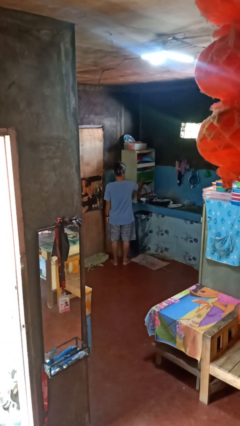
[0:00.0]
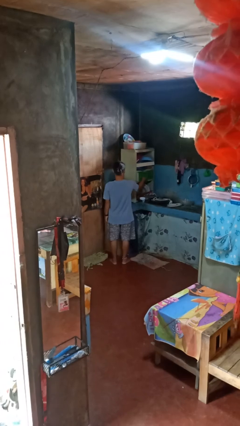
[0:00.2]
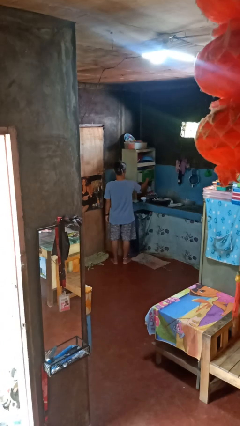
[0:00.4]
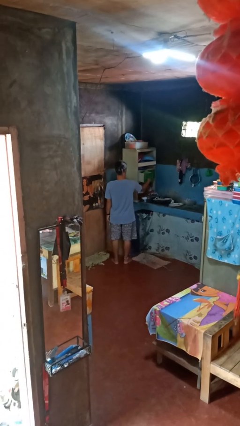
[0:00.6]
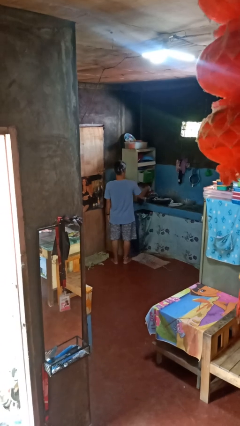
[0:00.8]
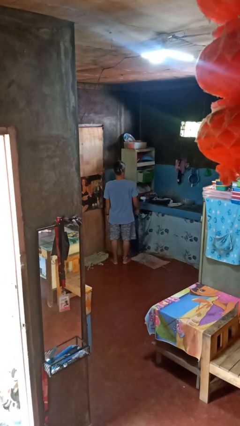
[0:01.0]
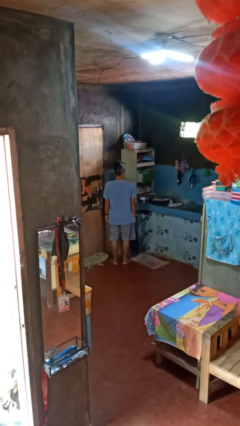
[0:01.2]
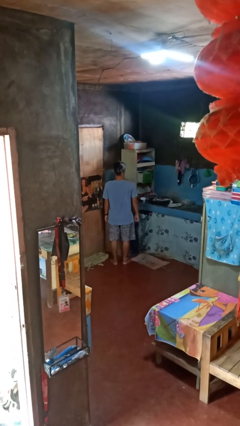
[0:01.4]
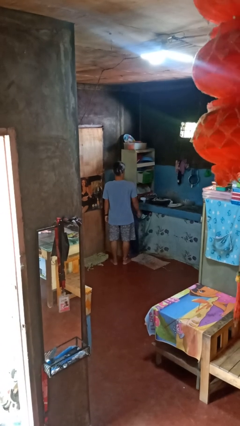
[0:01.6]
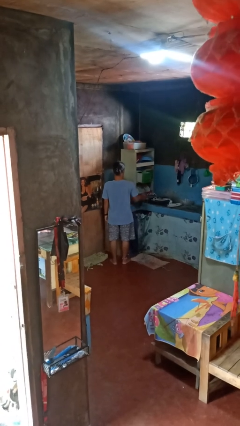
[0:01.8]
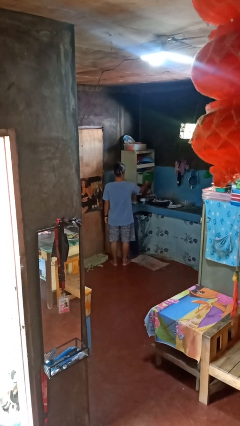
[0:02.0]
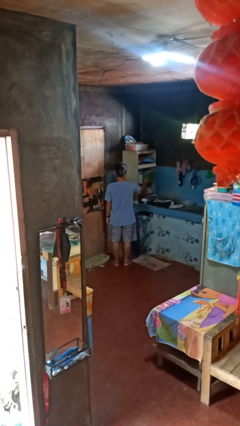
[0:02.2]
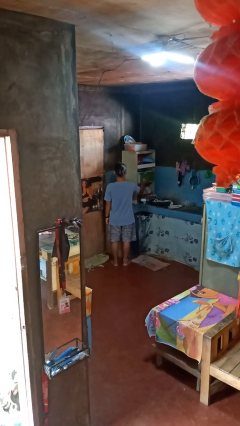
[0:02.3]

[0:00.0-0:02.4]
person opens kitchen drawer

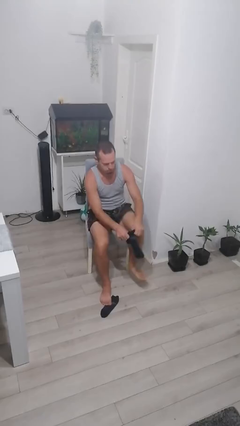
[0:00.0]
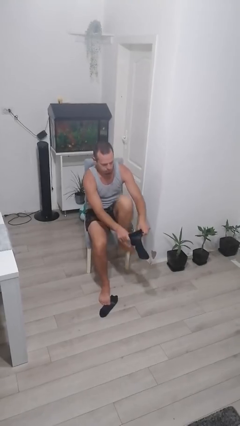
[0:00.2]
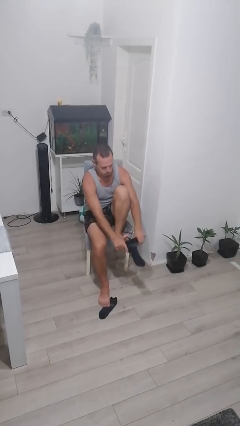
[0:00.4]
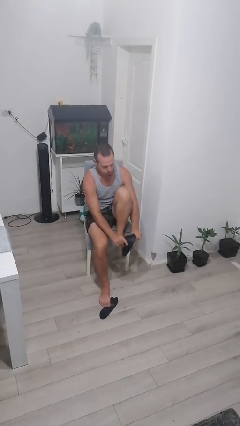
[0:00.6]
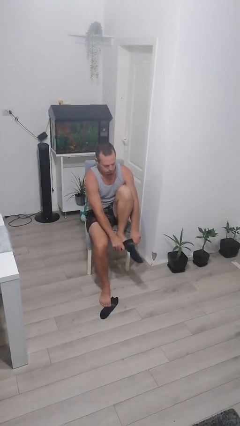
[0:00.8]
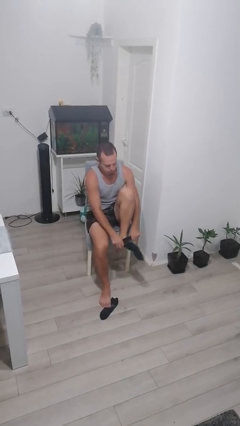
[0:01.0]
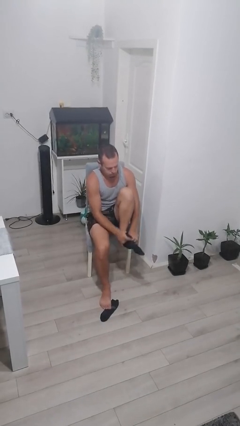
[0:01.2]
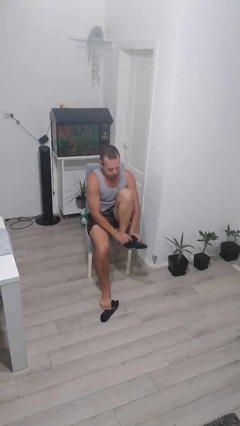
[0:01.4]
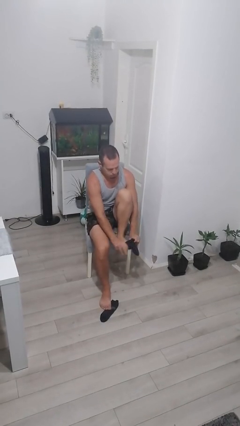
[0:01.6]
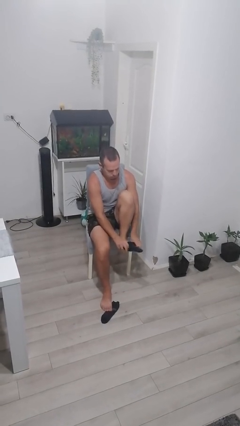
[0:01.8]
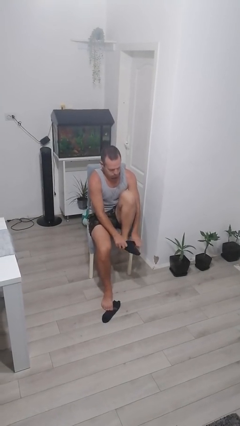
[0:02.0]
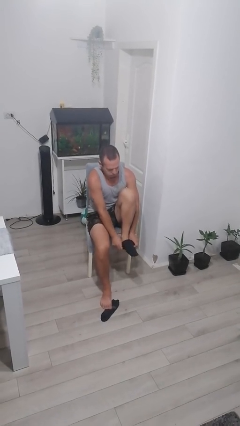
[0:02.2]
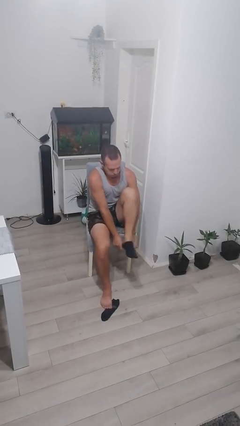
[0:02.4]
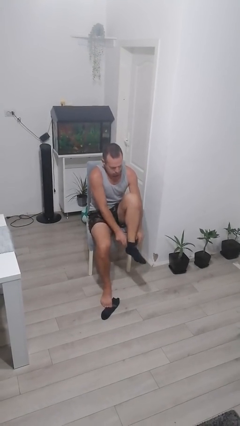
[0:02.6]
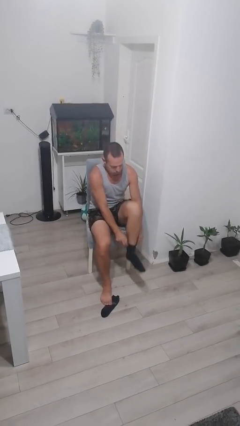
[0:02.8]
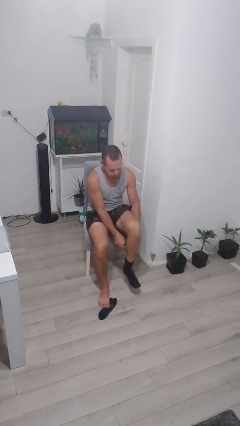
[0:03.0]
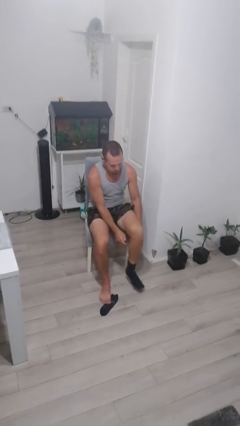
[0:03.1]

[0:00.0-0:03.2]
person puts on socks

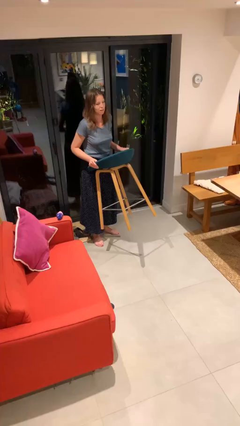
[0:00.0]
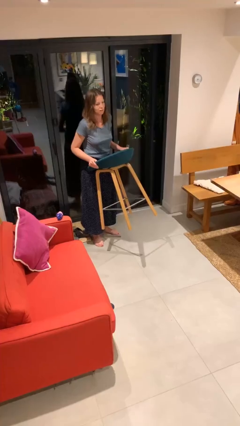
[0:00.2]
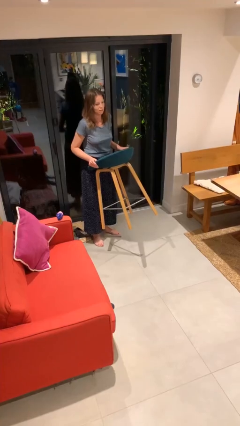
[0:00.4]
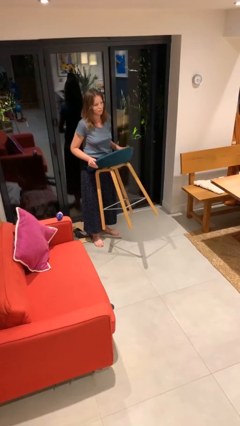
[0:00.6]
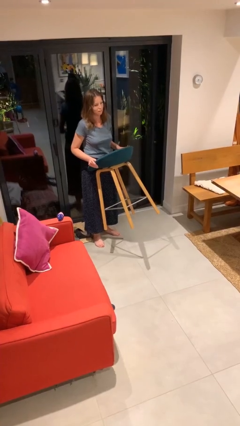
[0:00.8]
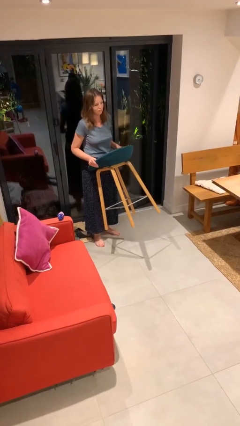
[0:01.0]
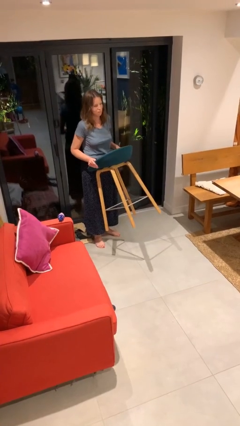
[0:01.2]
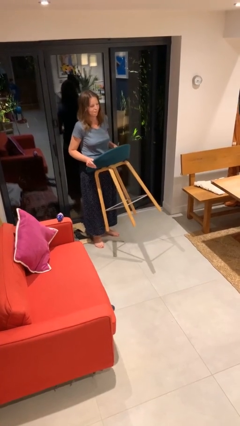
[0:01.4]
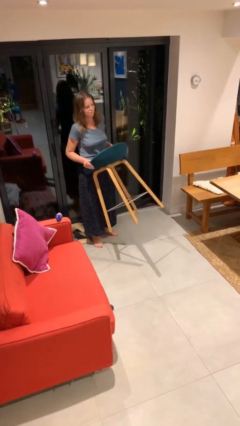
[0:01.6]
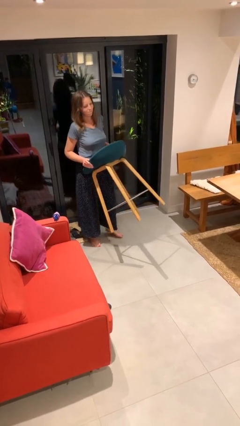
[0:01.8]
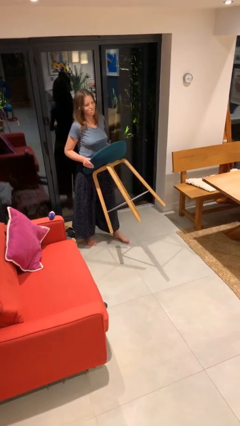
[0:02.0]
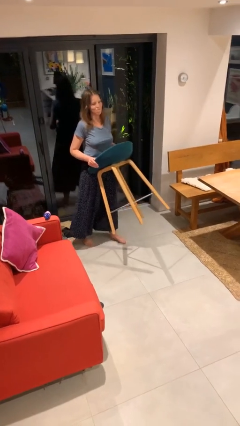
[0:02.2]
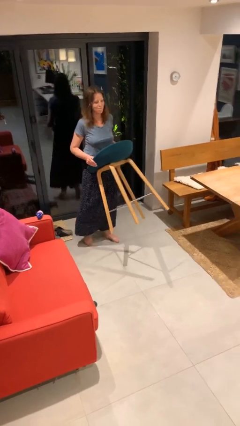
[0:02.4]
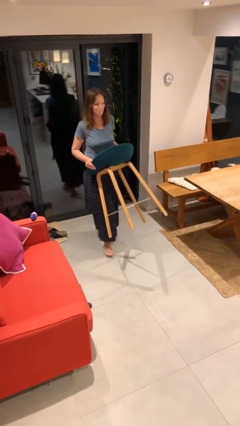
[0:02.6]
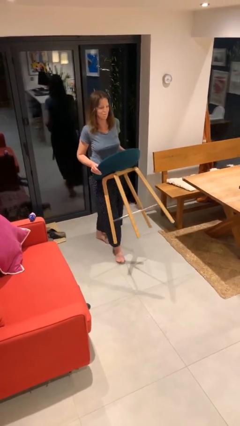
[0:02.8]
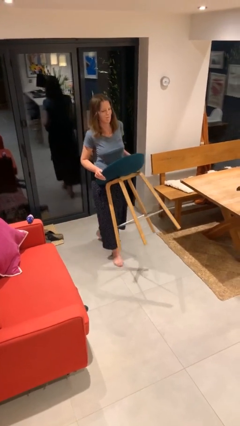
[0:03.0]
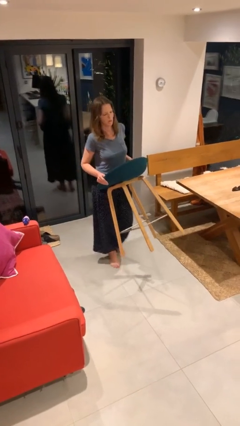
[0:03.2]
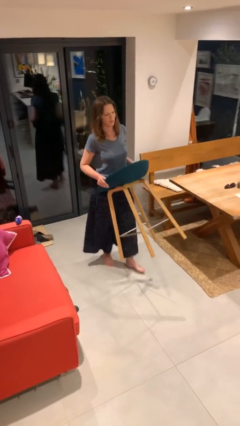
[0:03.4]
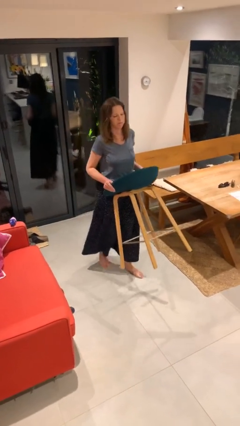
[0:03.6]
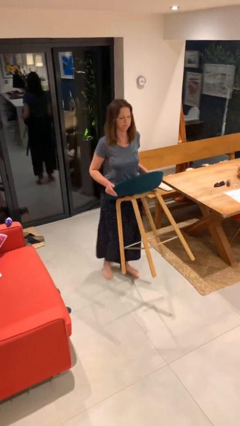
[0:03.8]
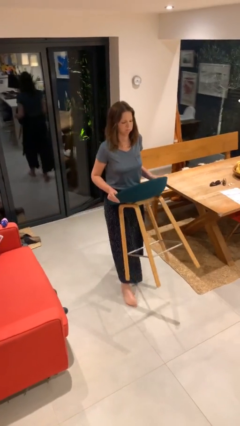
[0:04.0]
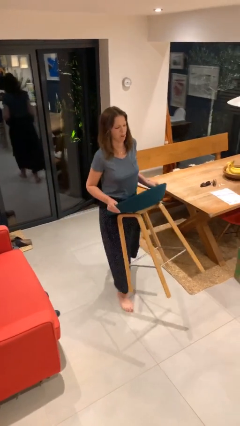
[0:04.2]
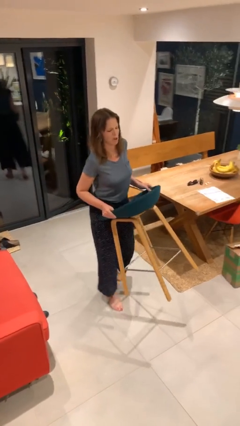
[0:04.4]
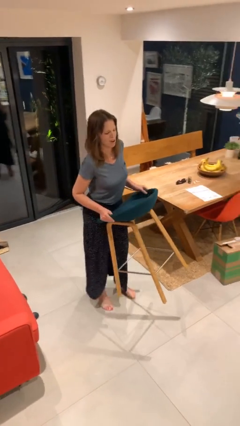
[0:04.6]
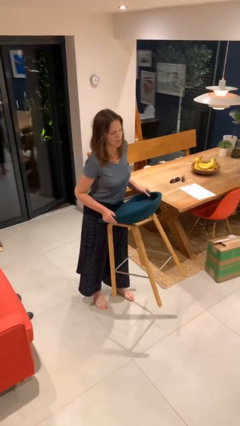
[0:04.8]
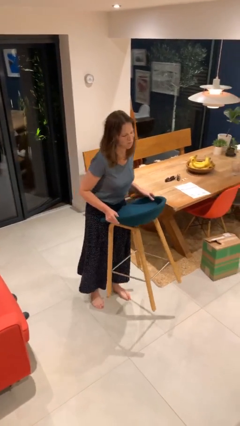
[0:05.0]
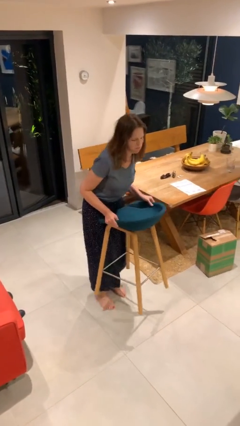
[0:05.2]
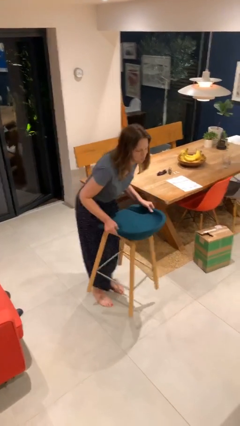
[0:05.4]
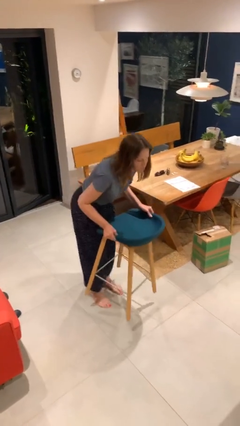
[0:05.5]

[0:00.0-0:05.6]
person carries heavy object

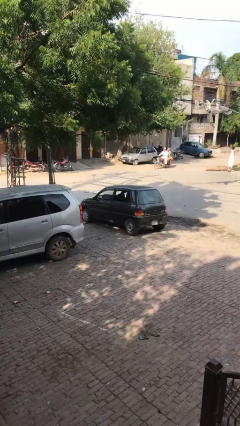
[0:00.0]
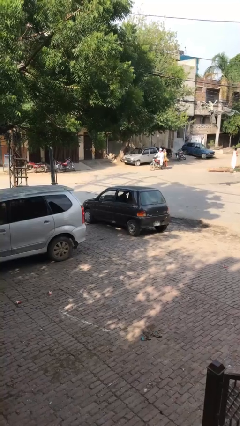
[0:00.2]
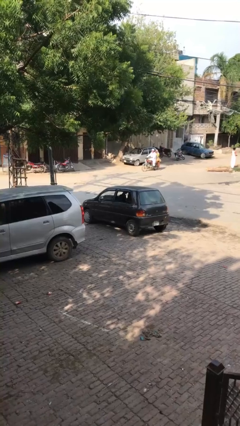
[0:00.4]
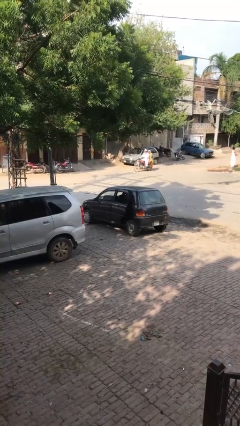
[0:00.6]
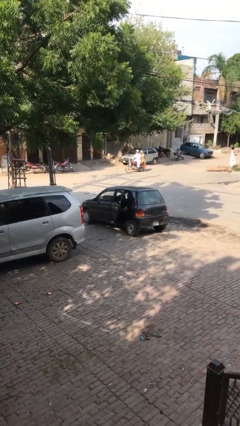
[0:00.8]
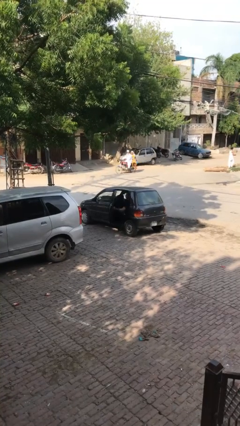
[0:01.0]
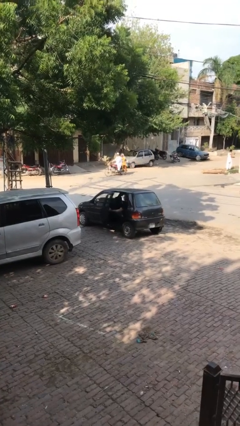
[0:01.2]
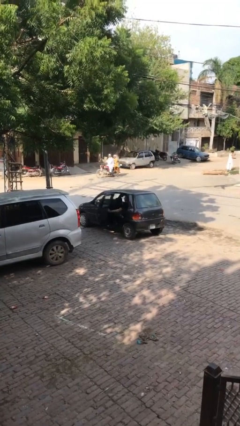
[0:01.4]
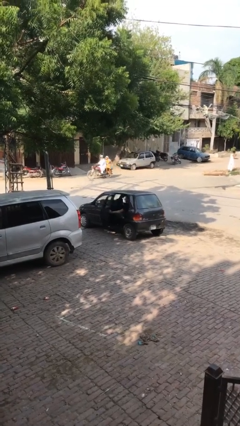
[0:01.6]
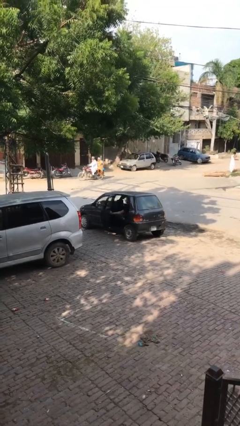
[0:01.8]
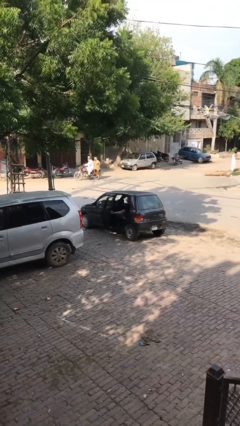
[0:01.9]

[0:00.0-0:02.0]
person opens car door

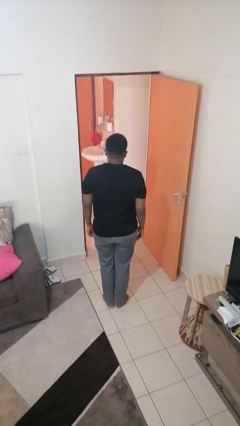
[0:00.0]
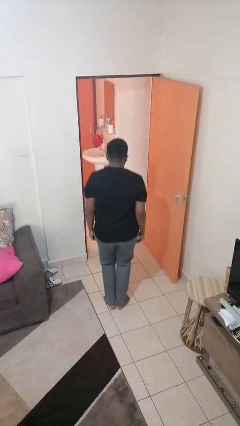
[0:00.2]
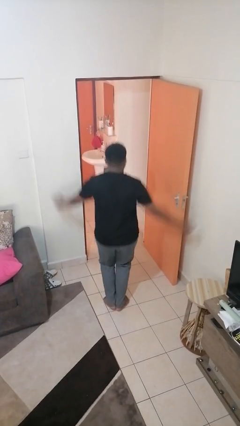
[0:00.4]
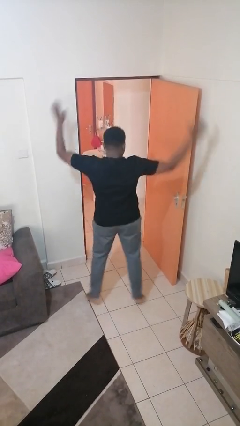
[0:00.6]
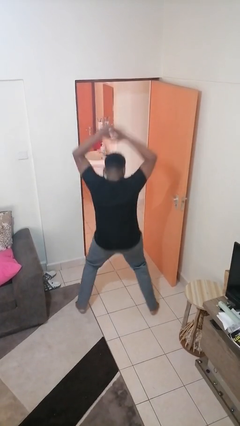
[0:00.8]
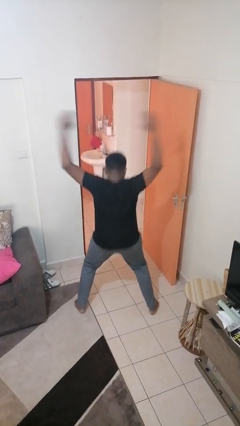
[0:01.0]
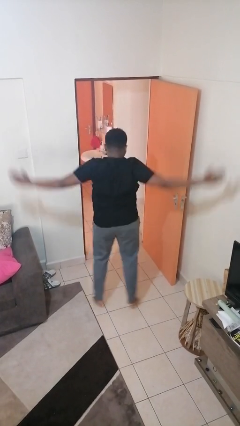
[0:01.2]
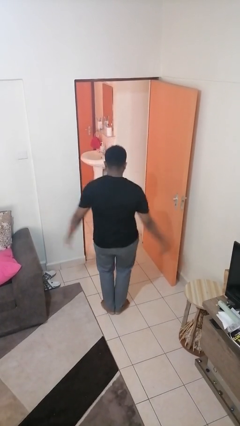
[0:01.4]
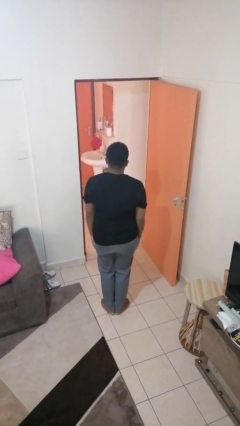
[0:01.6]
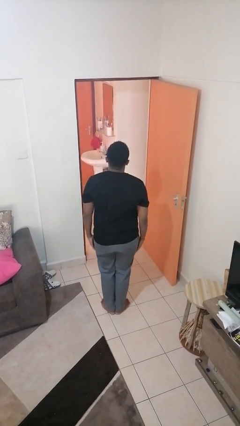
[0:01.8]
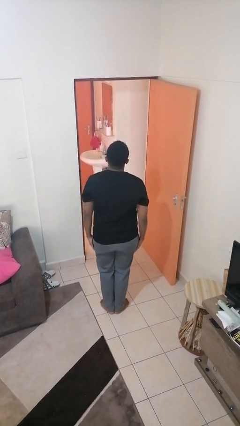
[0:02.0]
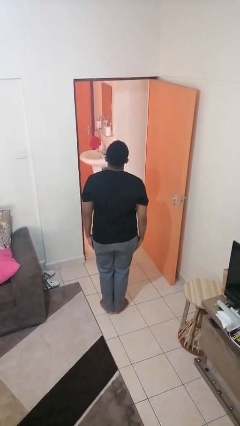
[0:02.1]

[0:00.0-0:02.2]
person exercises with jumping jacks

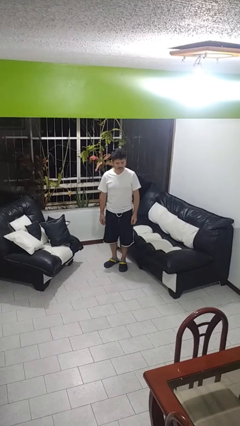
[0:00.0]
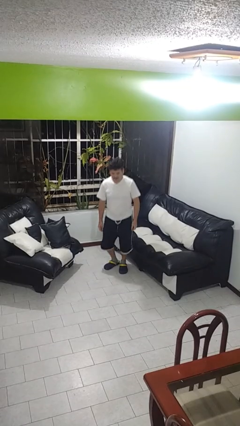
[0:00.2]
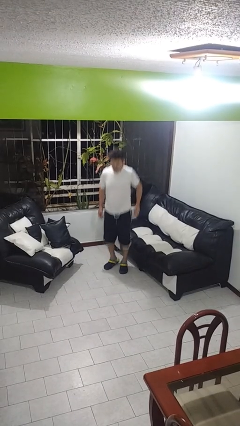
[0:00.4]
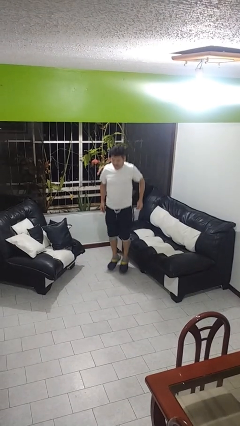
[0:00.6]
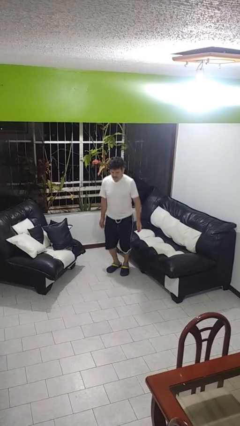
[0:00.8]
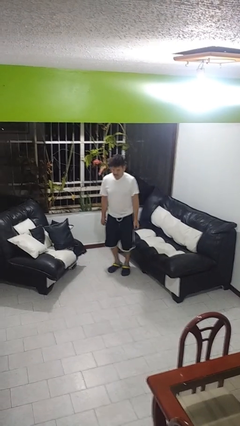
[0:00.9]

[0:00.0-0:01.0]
person jumps

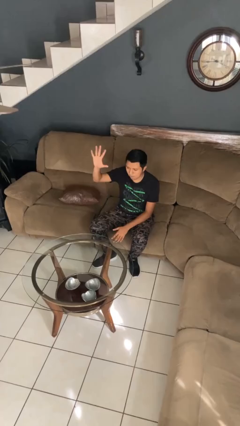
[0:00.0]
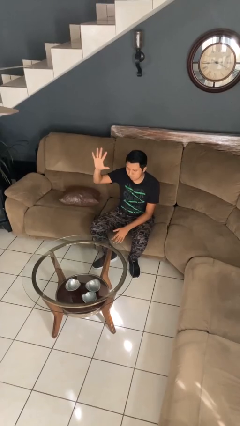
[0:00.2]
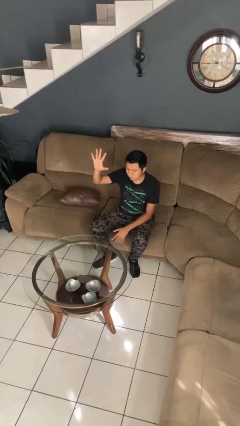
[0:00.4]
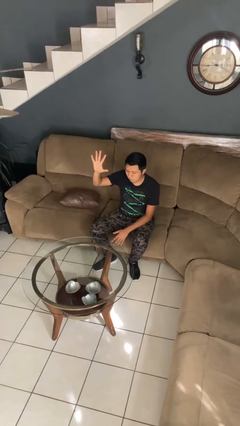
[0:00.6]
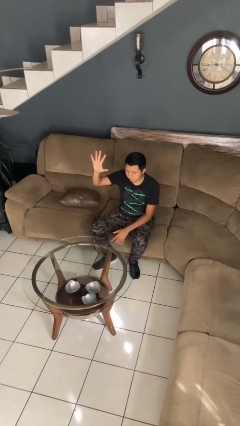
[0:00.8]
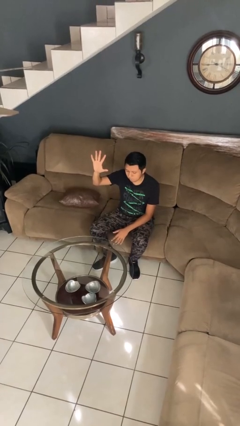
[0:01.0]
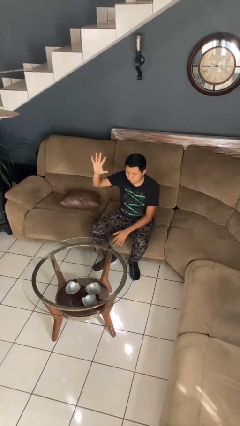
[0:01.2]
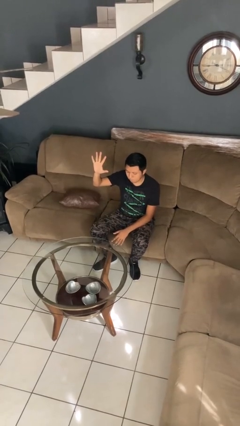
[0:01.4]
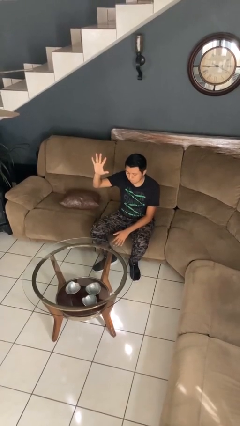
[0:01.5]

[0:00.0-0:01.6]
person gestures number five
